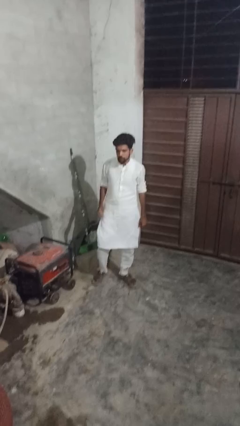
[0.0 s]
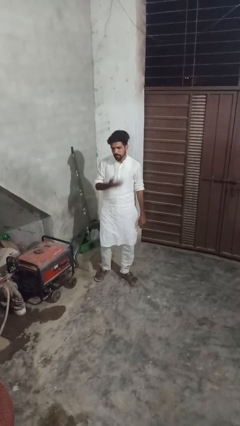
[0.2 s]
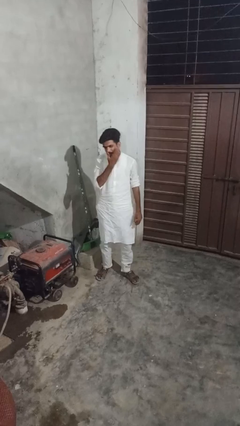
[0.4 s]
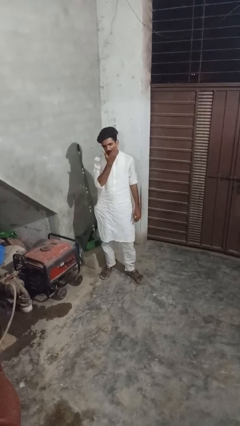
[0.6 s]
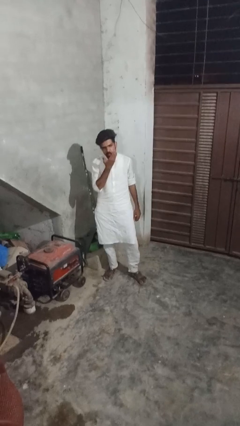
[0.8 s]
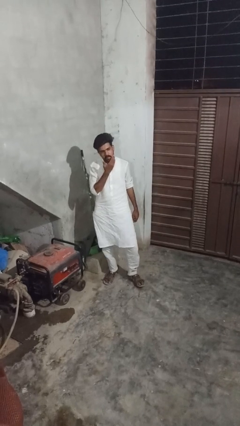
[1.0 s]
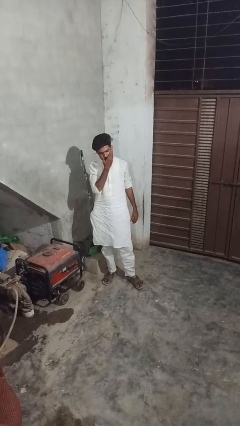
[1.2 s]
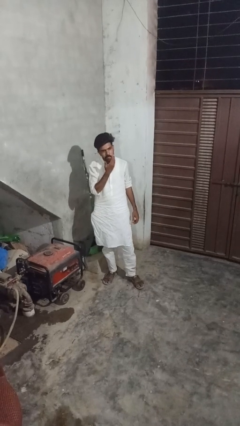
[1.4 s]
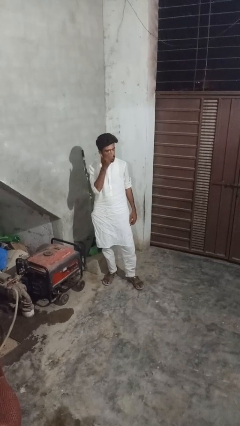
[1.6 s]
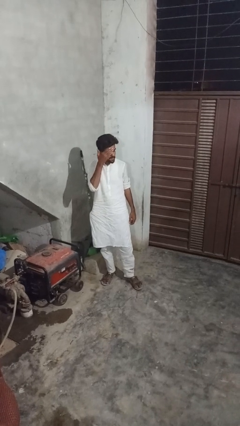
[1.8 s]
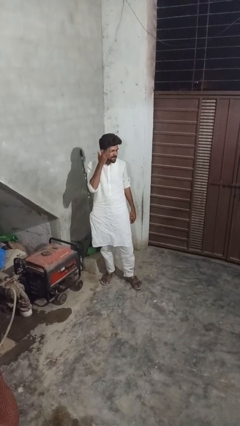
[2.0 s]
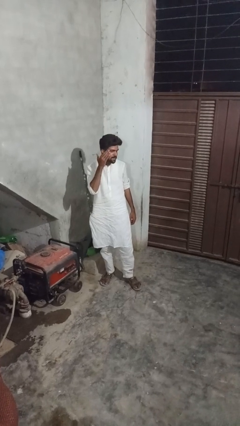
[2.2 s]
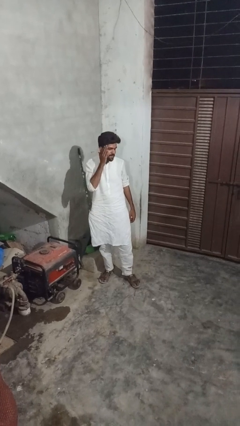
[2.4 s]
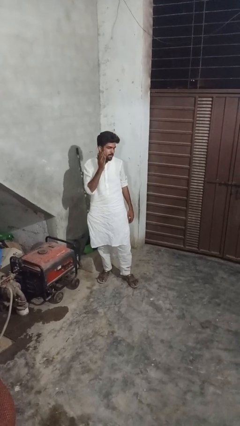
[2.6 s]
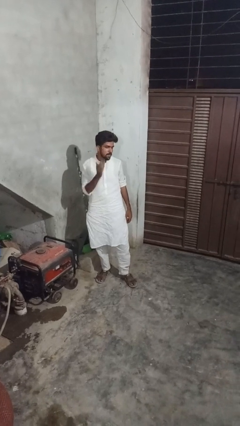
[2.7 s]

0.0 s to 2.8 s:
person scratches face

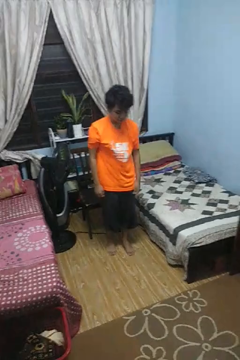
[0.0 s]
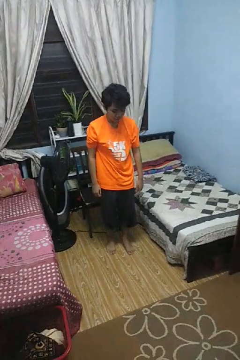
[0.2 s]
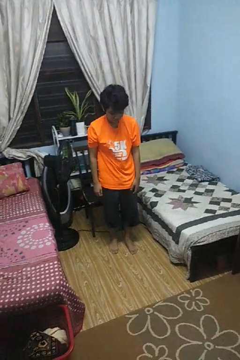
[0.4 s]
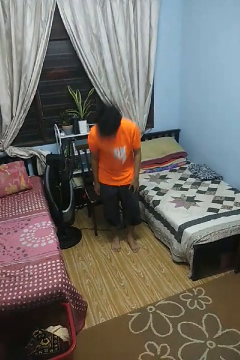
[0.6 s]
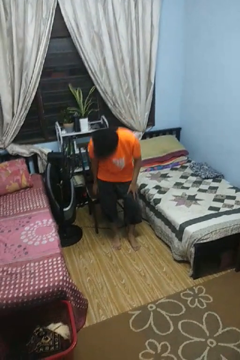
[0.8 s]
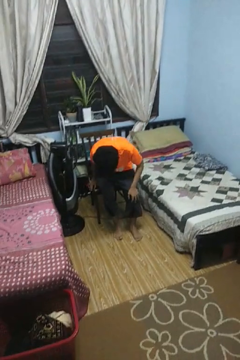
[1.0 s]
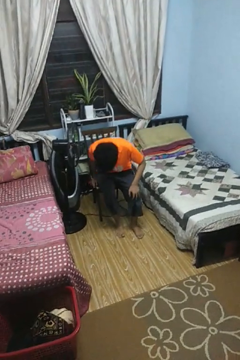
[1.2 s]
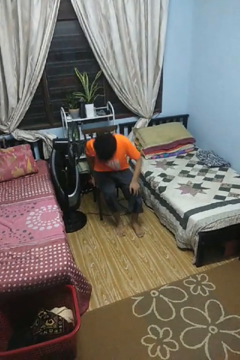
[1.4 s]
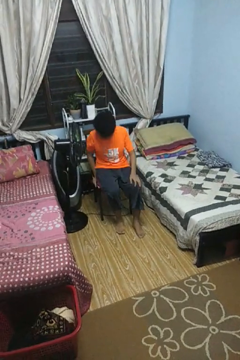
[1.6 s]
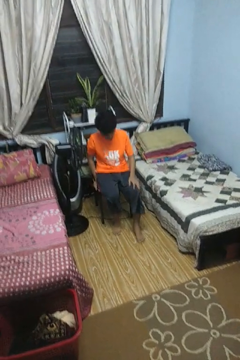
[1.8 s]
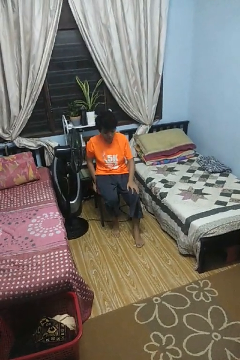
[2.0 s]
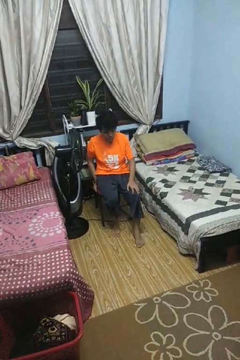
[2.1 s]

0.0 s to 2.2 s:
person sits down

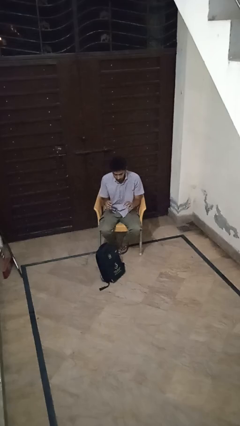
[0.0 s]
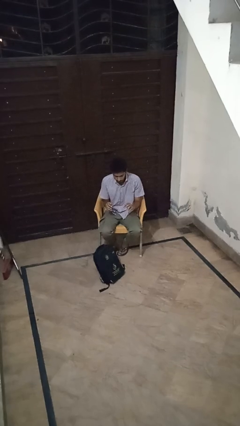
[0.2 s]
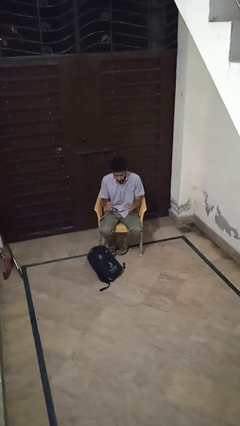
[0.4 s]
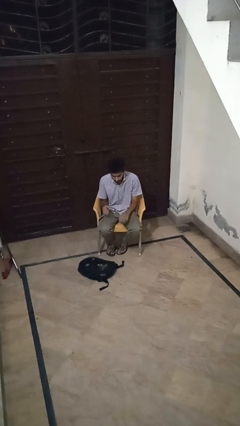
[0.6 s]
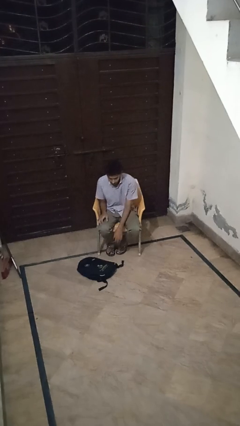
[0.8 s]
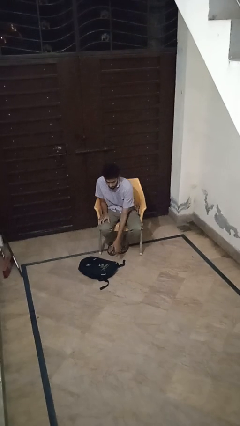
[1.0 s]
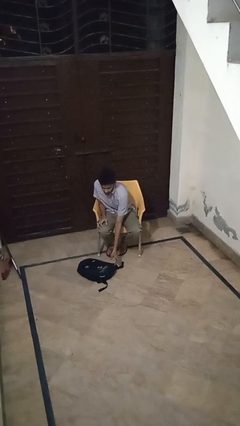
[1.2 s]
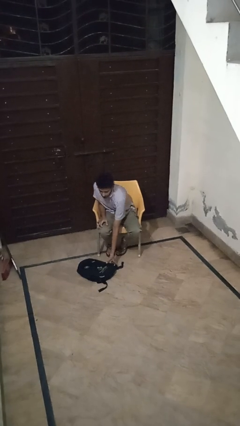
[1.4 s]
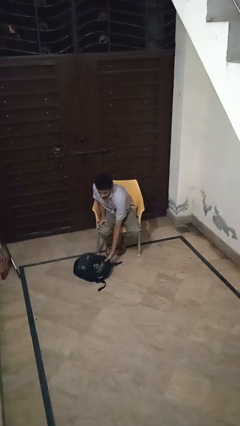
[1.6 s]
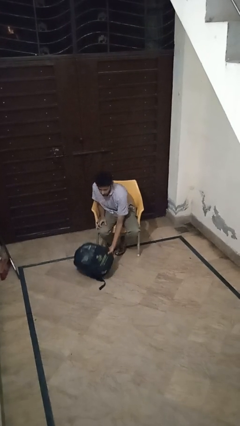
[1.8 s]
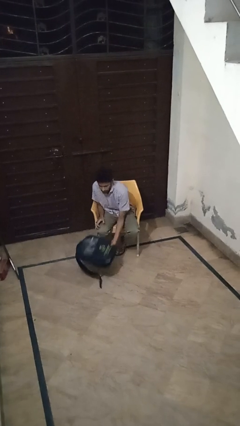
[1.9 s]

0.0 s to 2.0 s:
person picks up object from floor

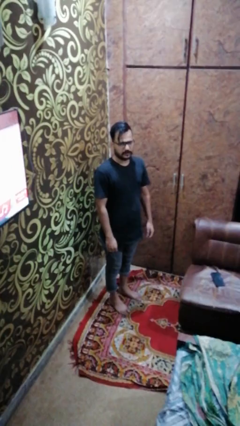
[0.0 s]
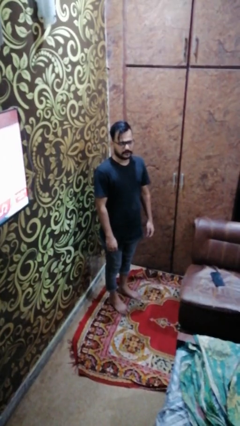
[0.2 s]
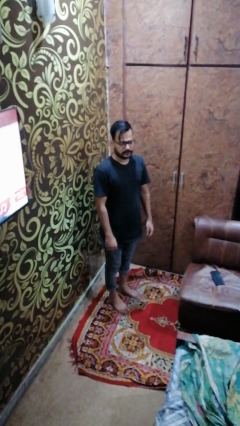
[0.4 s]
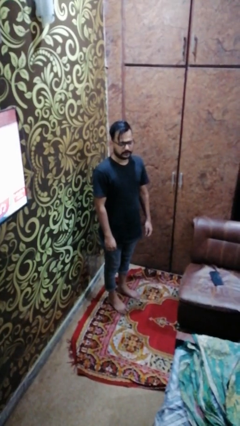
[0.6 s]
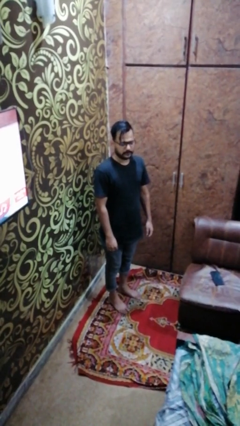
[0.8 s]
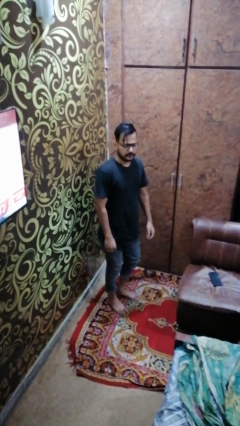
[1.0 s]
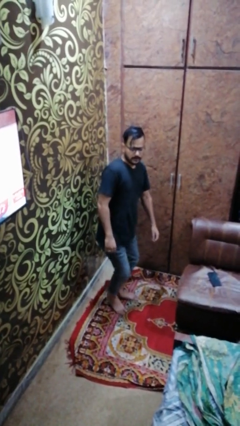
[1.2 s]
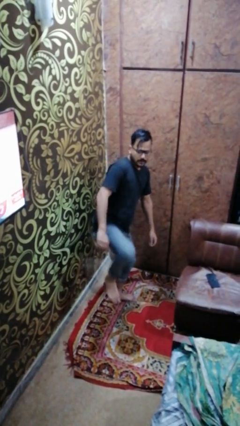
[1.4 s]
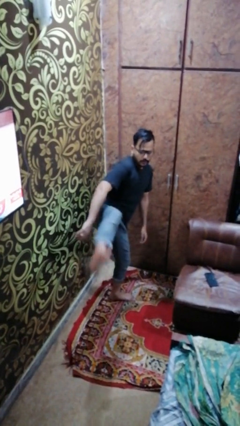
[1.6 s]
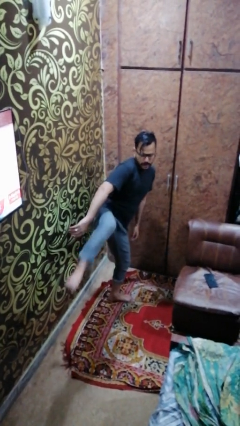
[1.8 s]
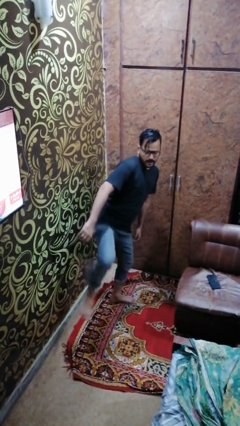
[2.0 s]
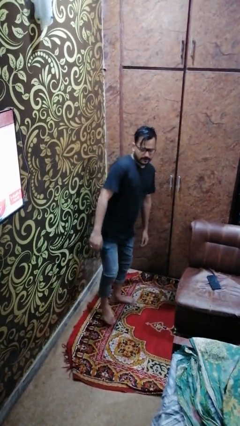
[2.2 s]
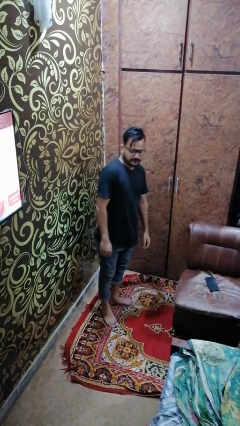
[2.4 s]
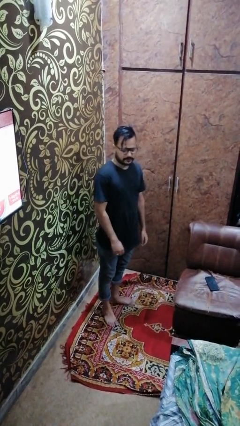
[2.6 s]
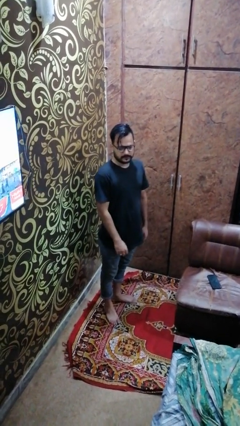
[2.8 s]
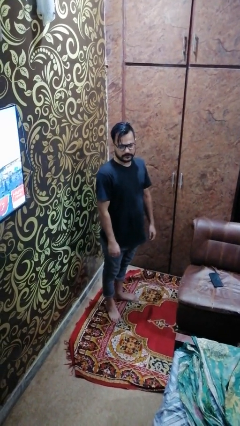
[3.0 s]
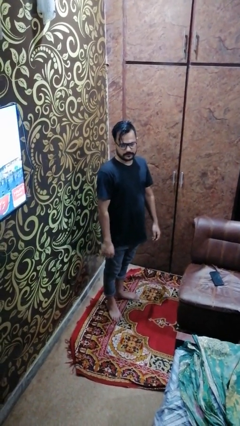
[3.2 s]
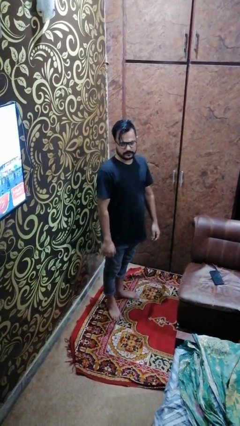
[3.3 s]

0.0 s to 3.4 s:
person karate kicks

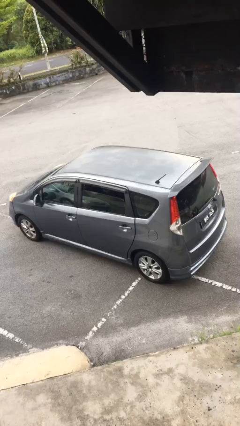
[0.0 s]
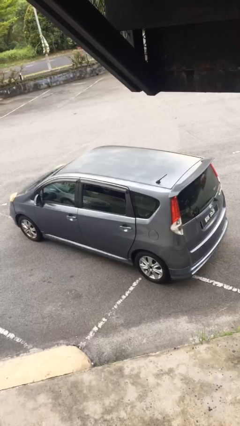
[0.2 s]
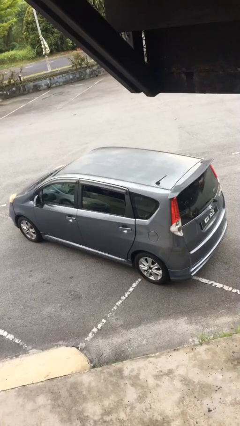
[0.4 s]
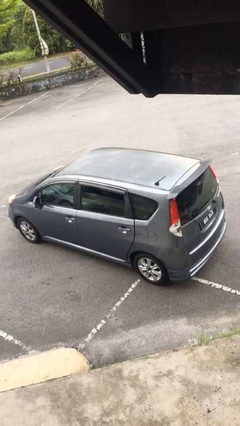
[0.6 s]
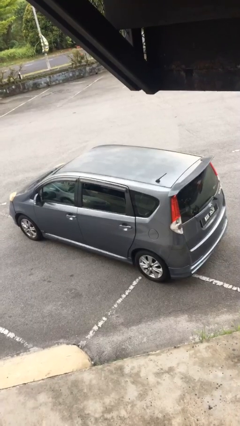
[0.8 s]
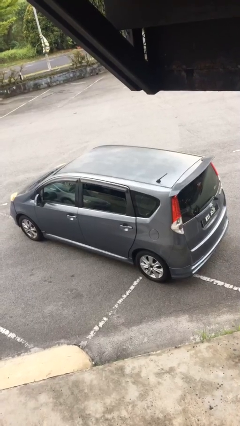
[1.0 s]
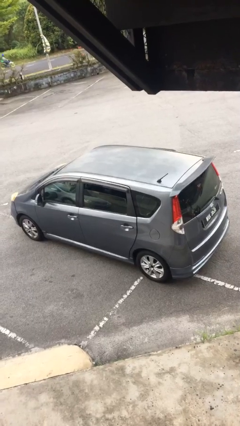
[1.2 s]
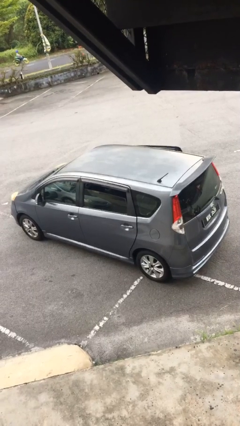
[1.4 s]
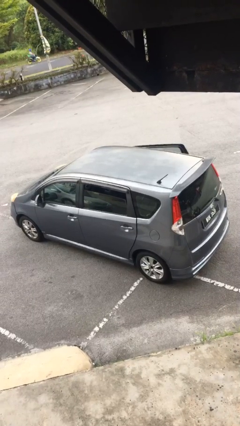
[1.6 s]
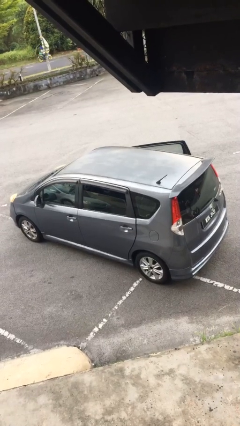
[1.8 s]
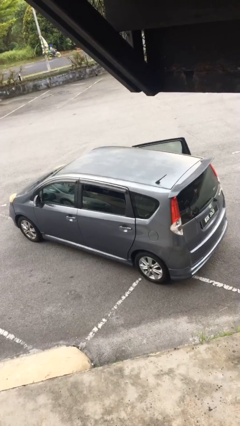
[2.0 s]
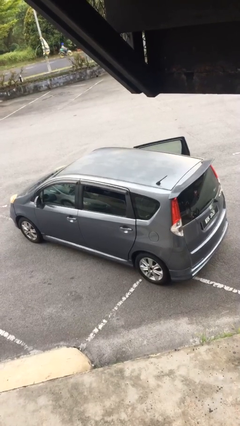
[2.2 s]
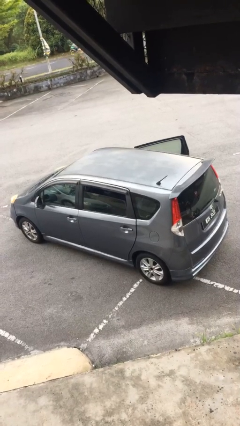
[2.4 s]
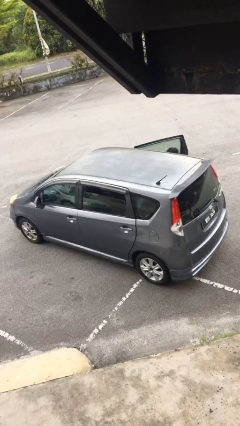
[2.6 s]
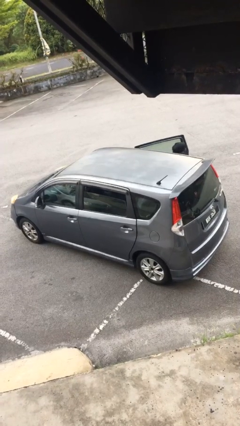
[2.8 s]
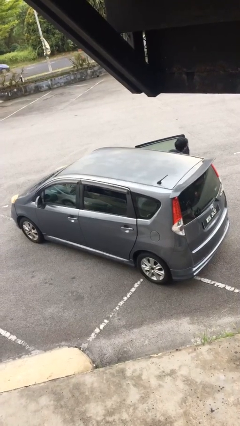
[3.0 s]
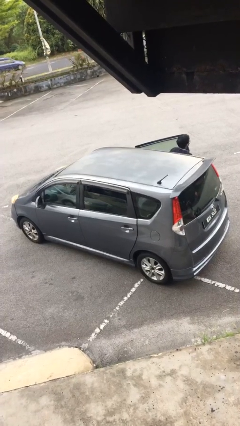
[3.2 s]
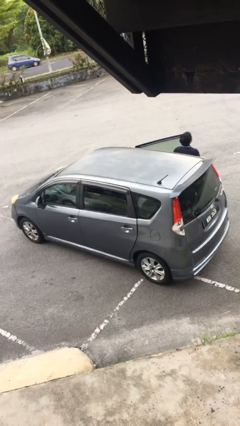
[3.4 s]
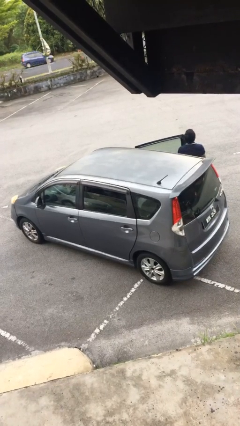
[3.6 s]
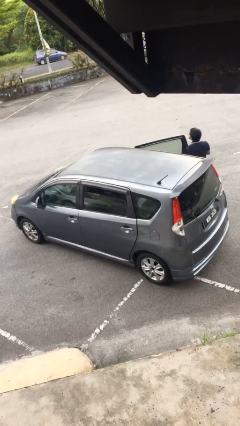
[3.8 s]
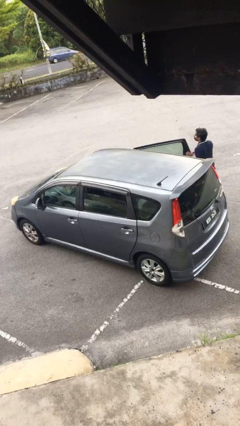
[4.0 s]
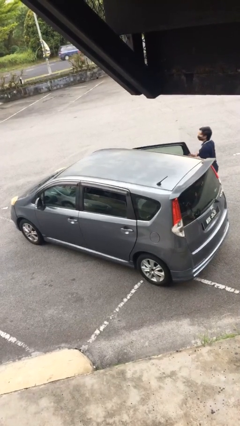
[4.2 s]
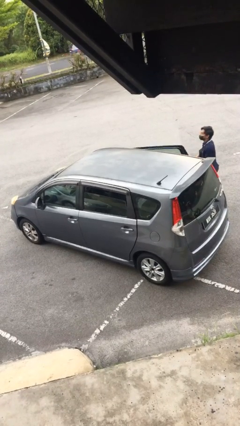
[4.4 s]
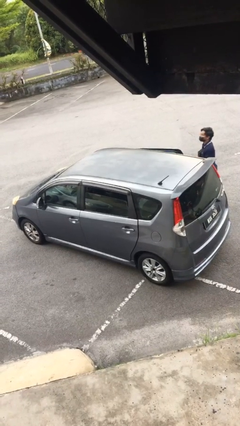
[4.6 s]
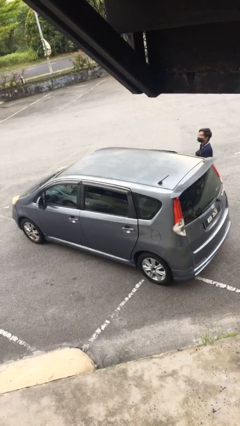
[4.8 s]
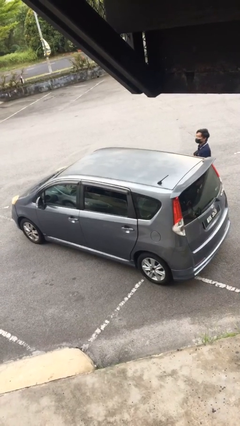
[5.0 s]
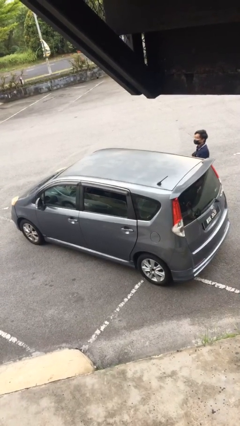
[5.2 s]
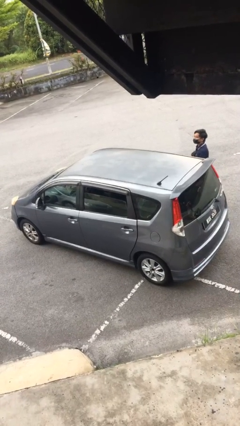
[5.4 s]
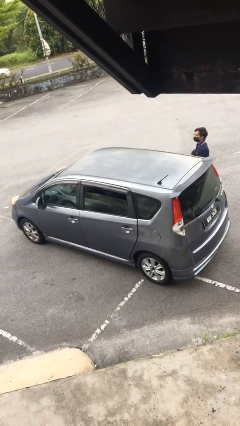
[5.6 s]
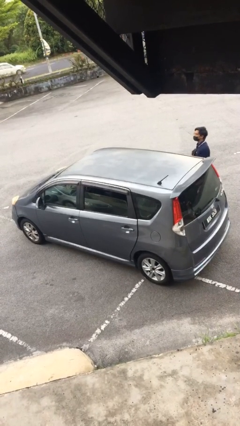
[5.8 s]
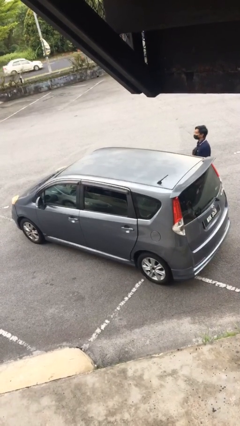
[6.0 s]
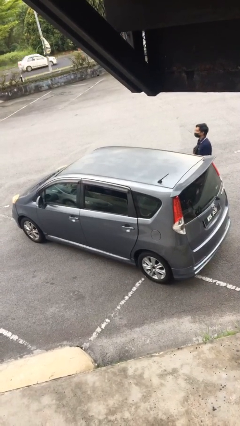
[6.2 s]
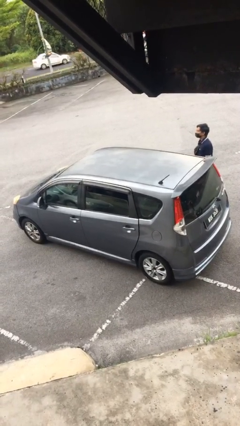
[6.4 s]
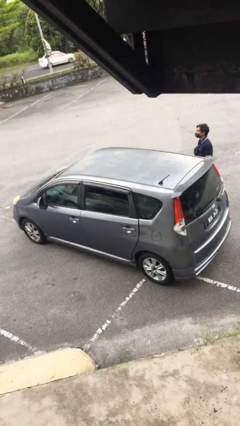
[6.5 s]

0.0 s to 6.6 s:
car drops off person

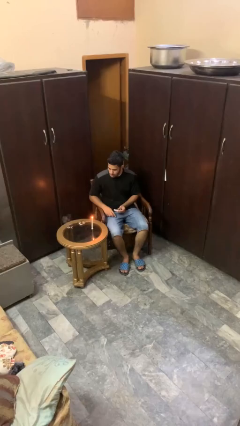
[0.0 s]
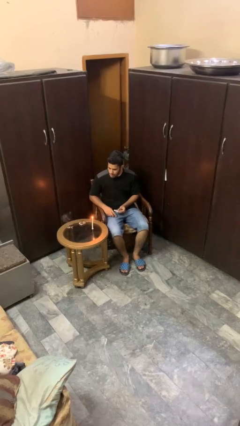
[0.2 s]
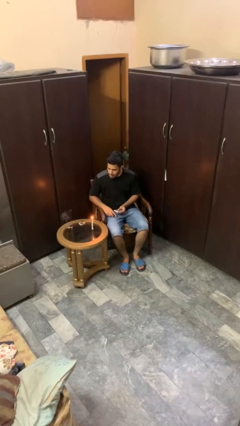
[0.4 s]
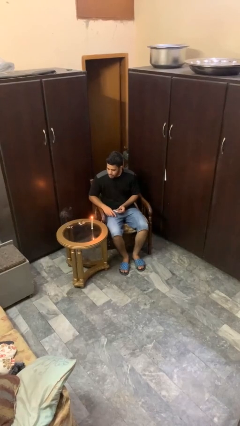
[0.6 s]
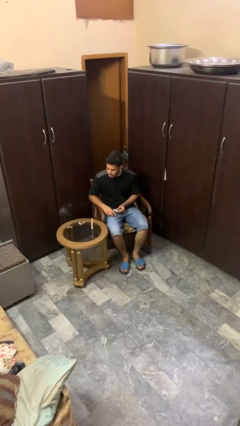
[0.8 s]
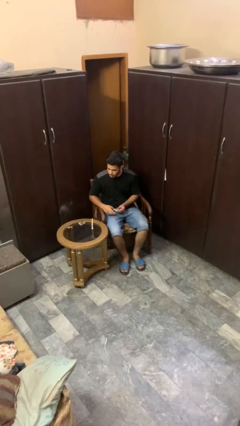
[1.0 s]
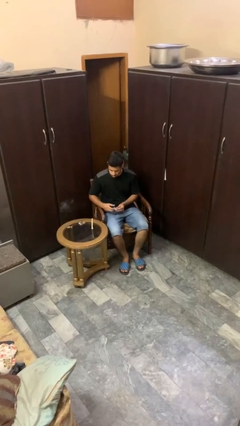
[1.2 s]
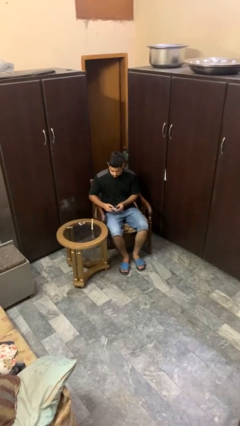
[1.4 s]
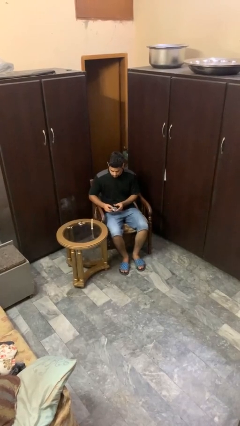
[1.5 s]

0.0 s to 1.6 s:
person extinguishes candle
